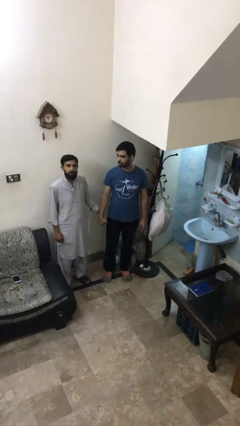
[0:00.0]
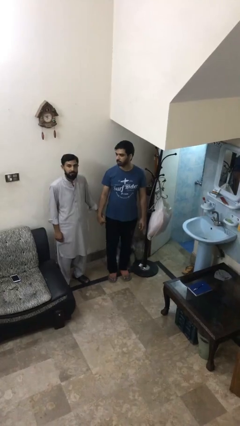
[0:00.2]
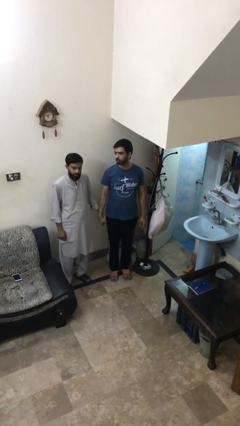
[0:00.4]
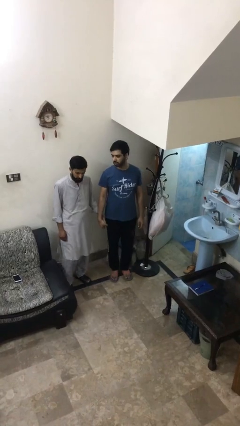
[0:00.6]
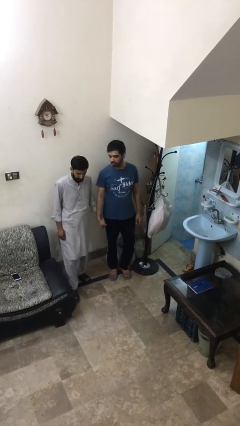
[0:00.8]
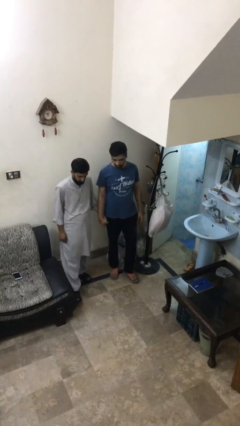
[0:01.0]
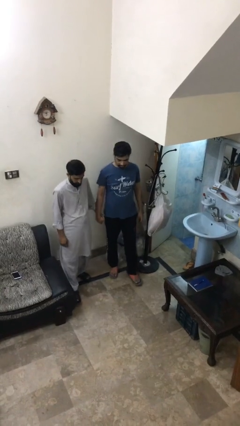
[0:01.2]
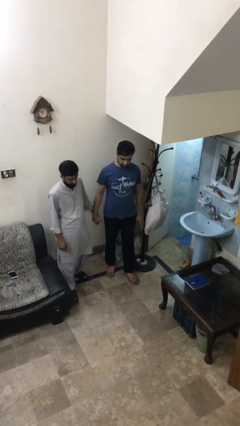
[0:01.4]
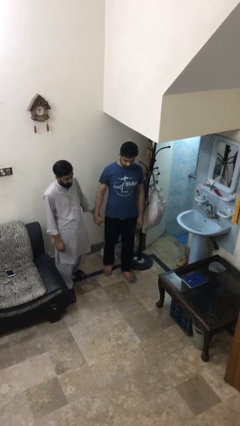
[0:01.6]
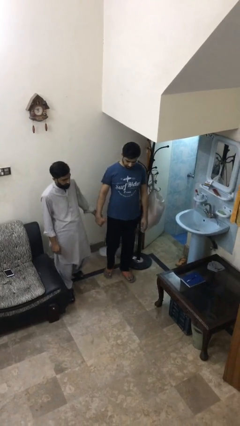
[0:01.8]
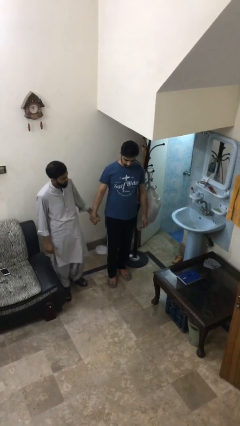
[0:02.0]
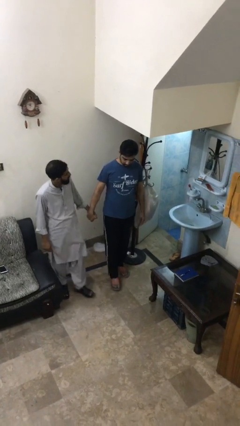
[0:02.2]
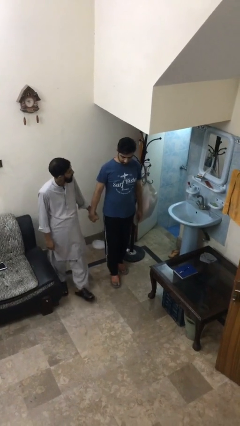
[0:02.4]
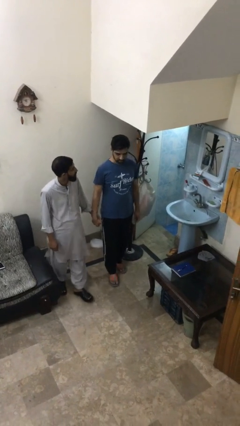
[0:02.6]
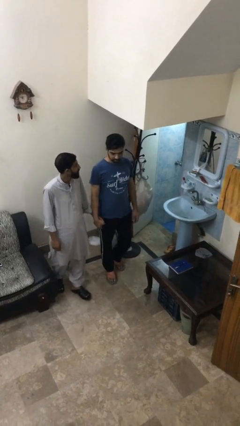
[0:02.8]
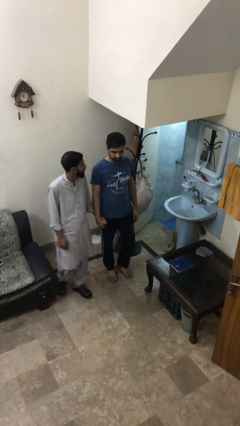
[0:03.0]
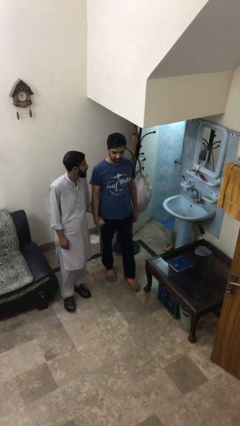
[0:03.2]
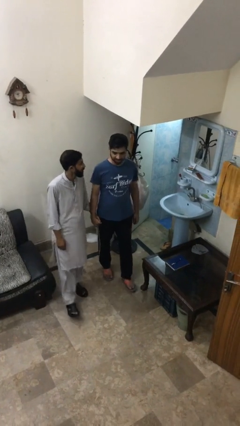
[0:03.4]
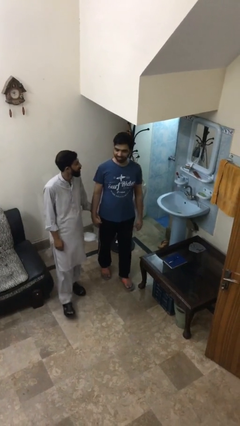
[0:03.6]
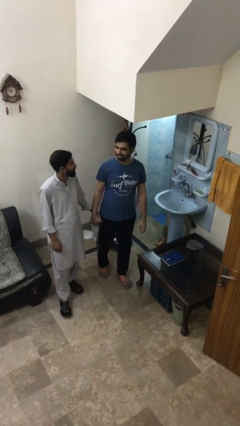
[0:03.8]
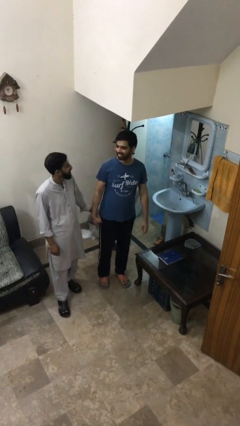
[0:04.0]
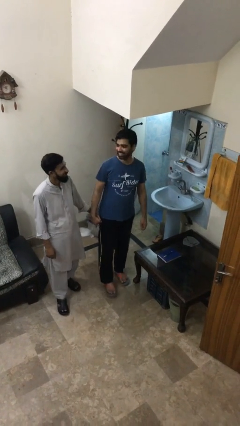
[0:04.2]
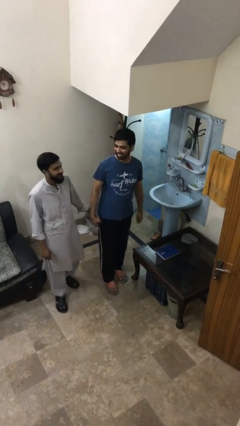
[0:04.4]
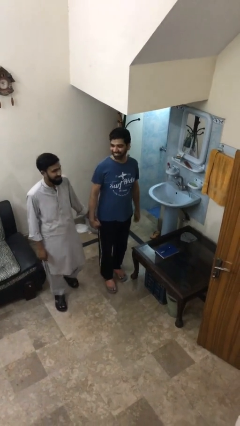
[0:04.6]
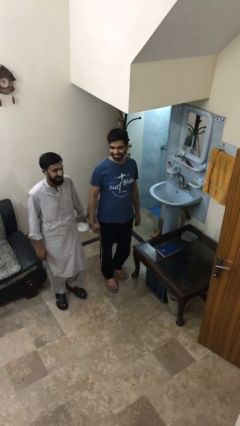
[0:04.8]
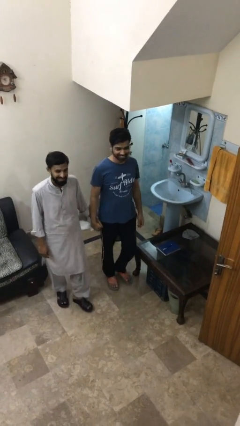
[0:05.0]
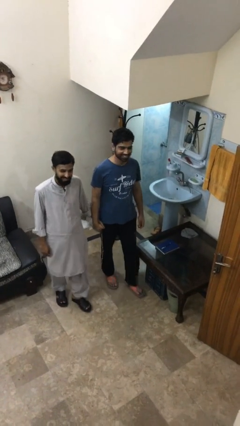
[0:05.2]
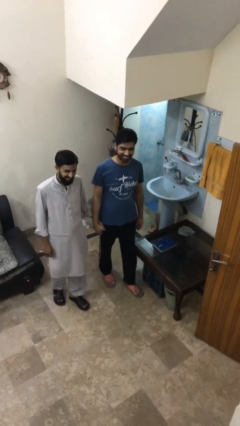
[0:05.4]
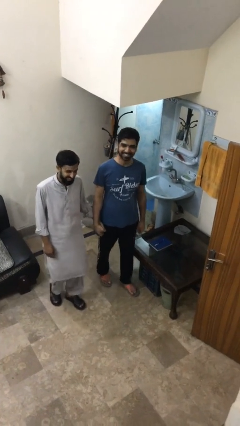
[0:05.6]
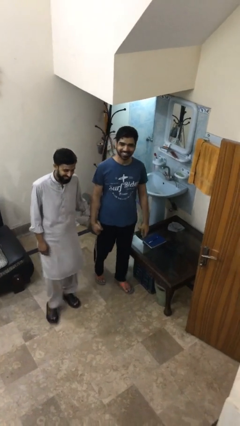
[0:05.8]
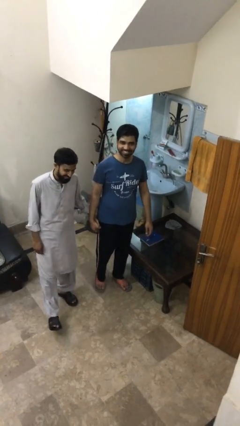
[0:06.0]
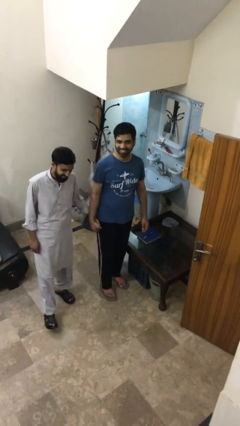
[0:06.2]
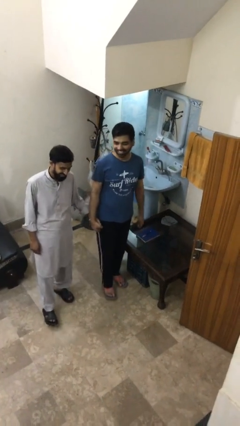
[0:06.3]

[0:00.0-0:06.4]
person holds hand

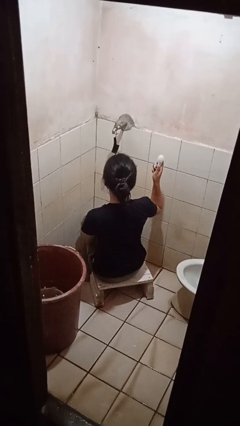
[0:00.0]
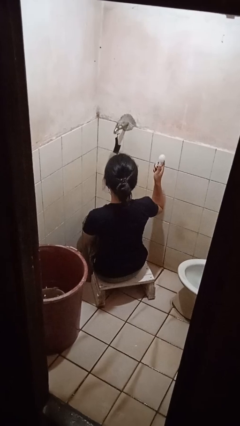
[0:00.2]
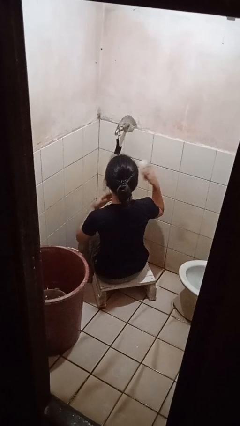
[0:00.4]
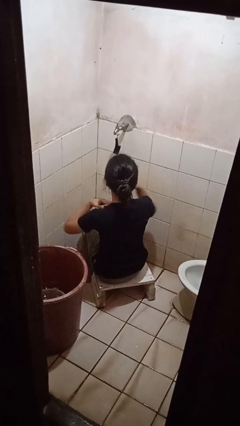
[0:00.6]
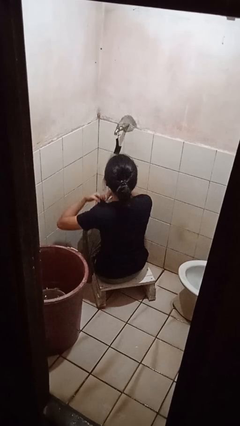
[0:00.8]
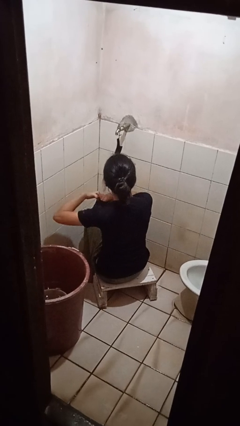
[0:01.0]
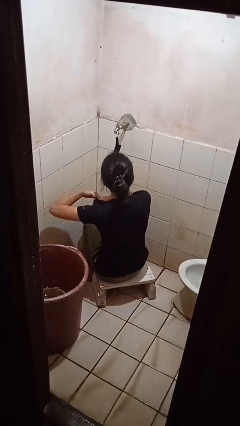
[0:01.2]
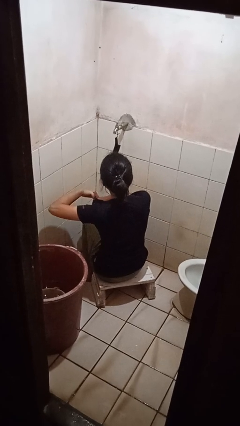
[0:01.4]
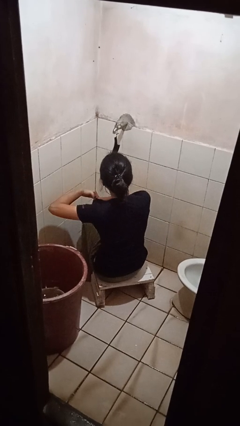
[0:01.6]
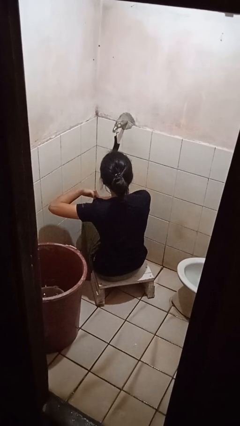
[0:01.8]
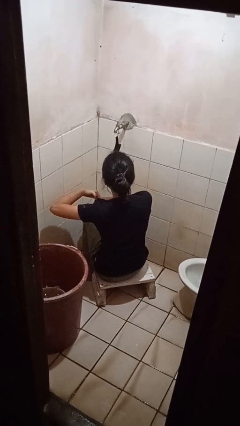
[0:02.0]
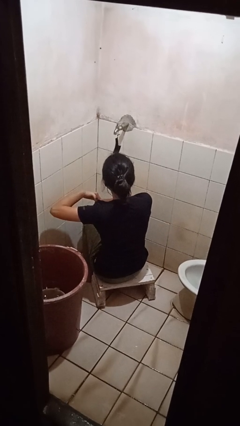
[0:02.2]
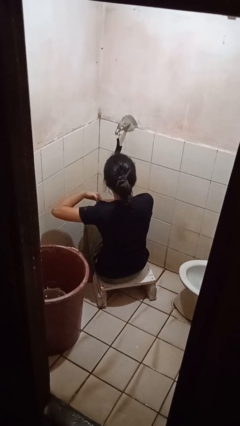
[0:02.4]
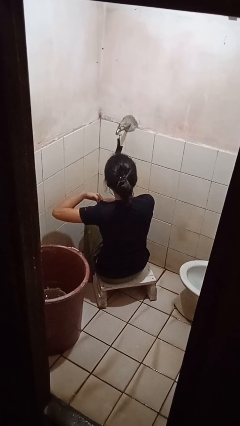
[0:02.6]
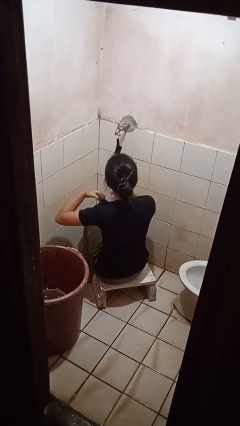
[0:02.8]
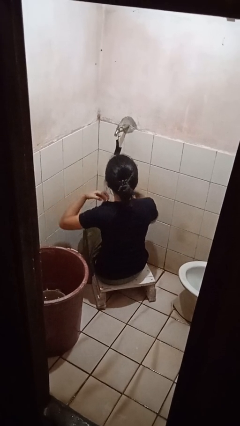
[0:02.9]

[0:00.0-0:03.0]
person applies deodorant

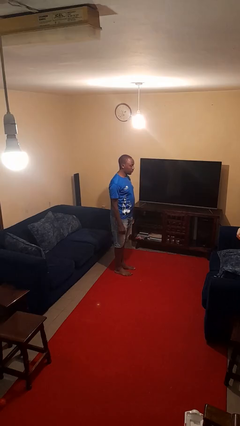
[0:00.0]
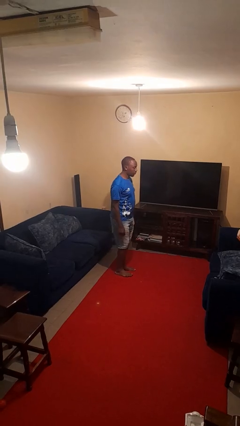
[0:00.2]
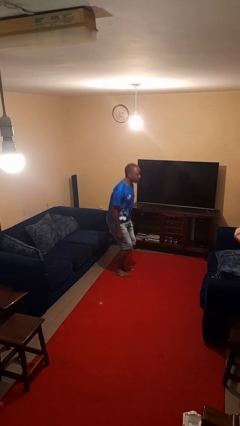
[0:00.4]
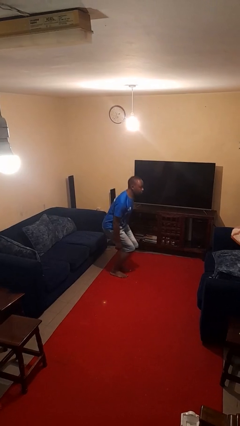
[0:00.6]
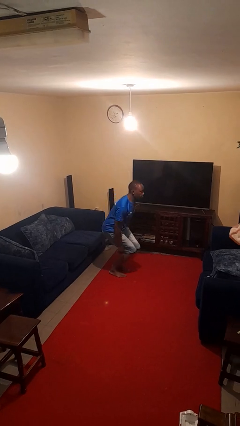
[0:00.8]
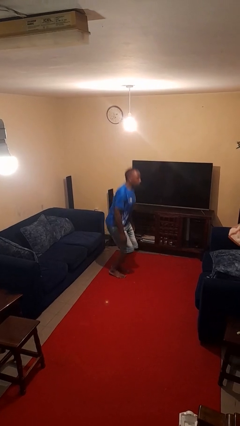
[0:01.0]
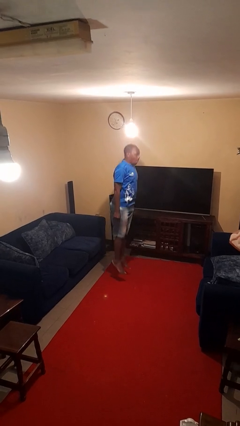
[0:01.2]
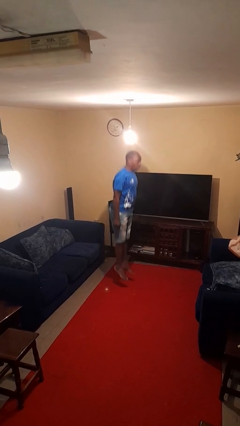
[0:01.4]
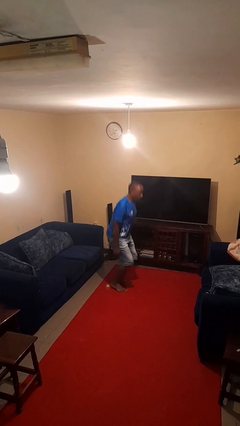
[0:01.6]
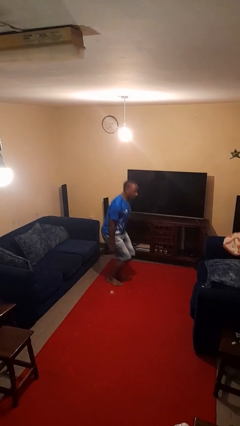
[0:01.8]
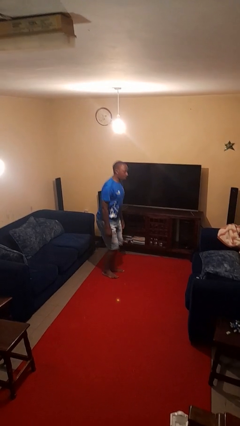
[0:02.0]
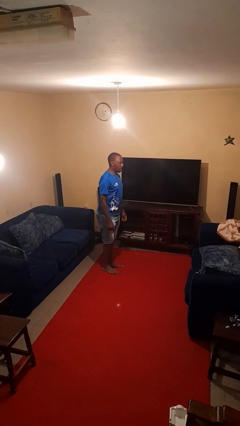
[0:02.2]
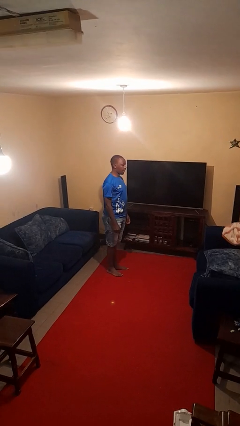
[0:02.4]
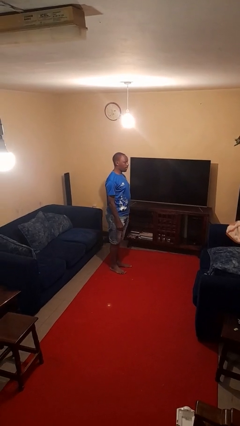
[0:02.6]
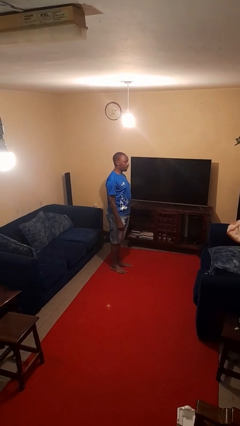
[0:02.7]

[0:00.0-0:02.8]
person jumps

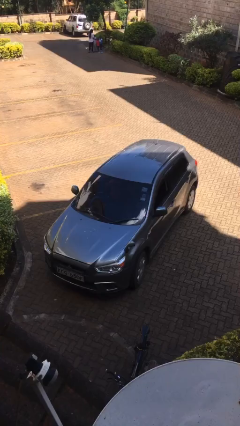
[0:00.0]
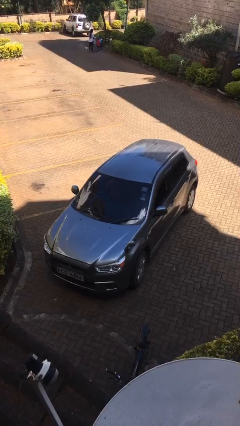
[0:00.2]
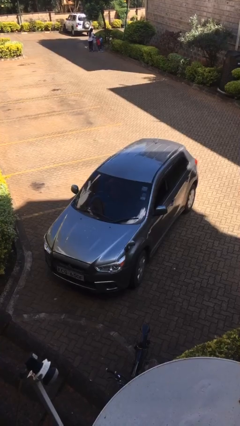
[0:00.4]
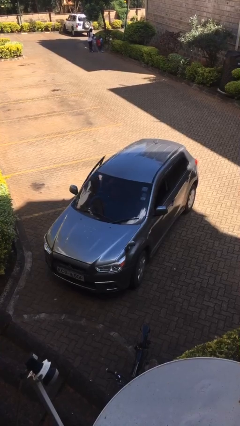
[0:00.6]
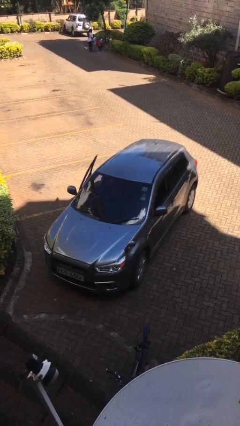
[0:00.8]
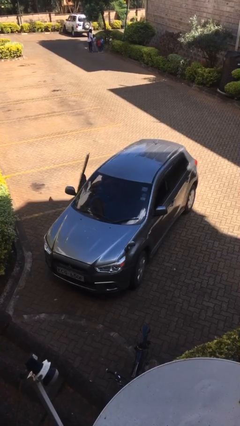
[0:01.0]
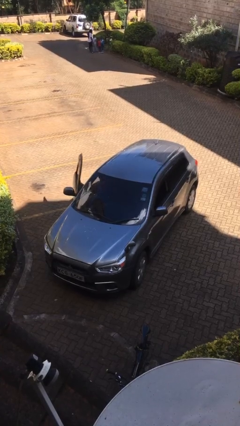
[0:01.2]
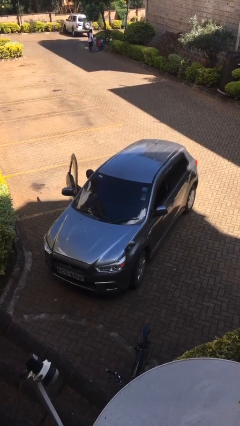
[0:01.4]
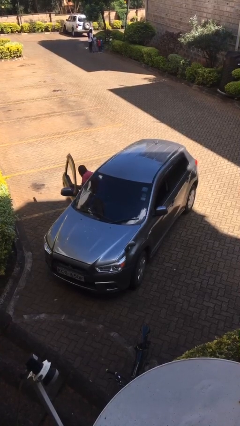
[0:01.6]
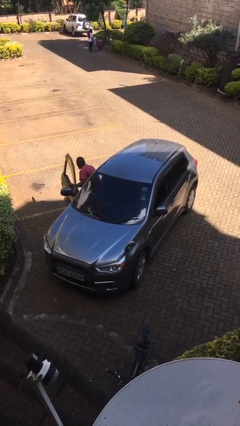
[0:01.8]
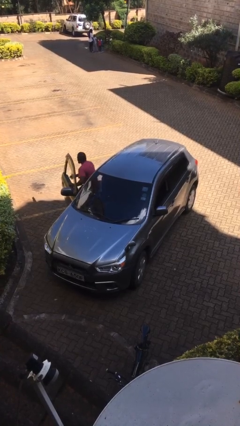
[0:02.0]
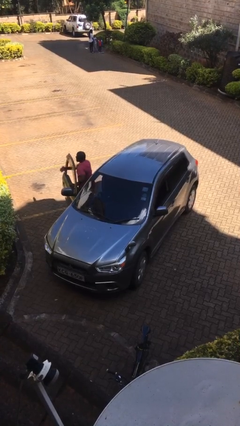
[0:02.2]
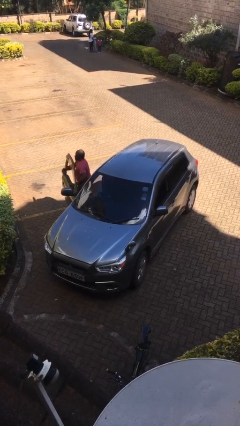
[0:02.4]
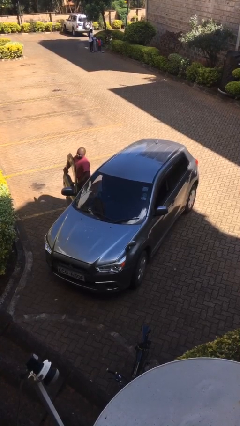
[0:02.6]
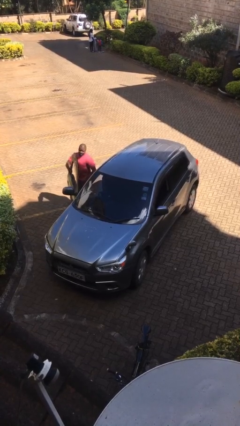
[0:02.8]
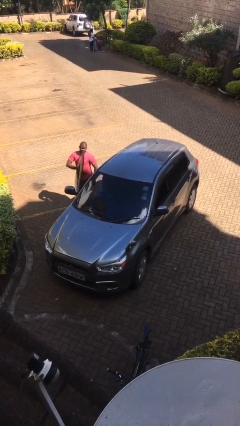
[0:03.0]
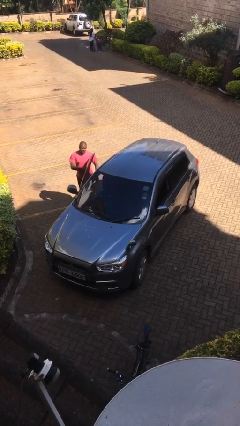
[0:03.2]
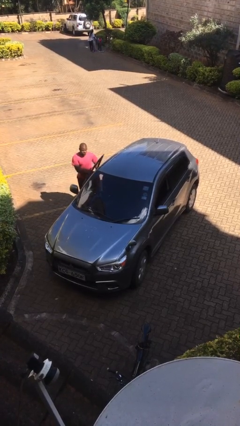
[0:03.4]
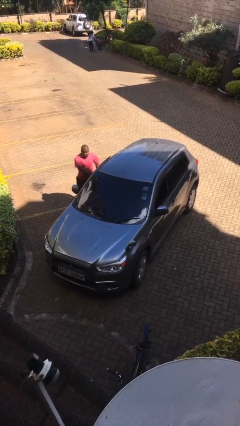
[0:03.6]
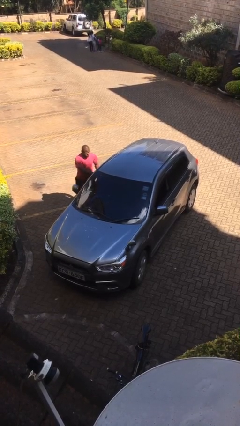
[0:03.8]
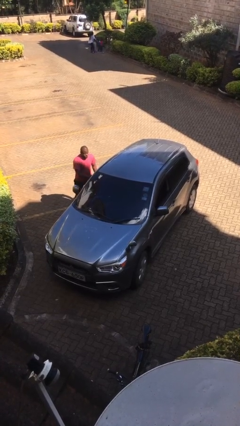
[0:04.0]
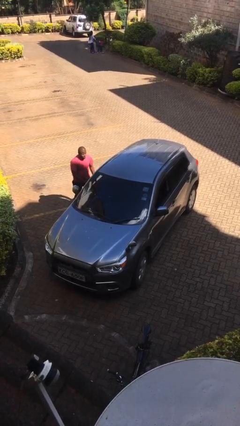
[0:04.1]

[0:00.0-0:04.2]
car drops off person

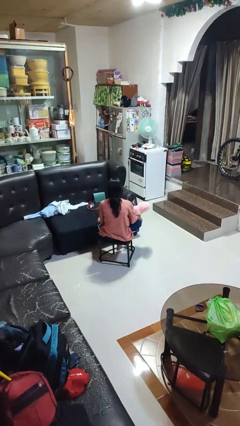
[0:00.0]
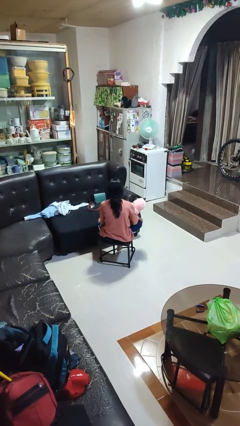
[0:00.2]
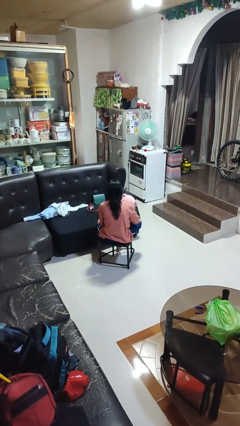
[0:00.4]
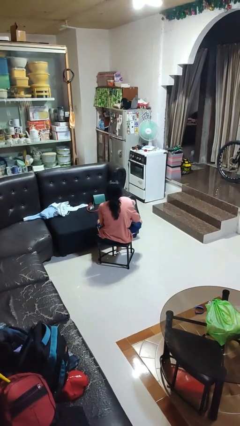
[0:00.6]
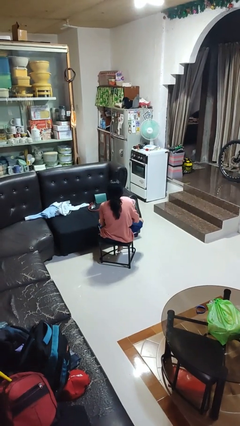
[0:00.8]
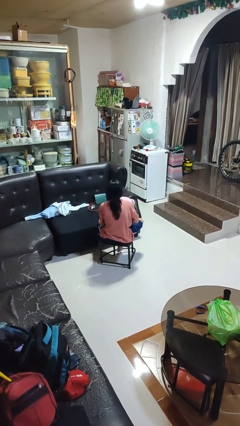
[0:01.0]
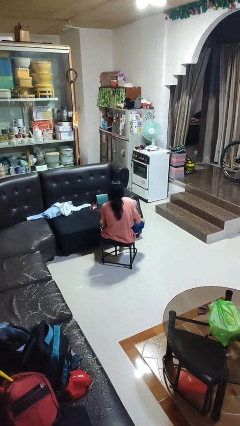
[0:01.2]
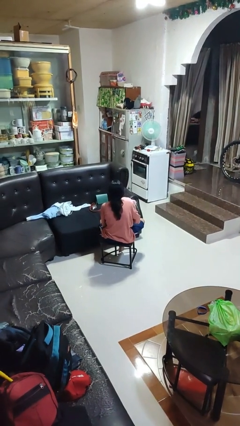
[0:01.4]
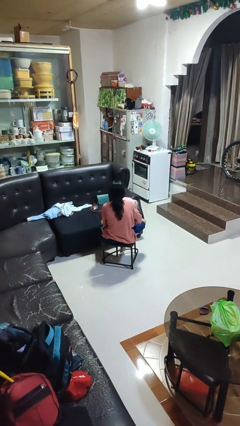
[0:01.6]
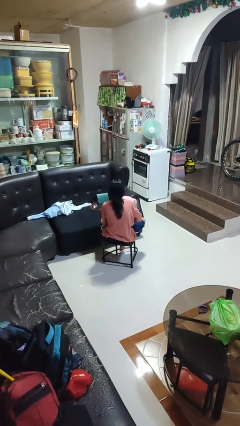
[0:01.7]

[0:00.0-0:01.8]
person hugs stuffed animal
